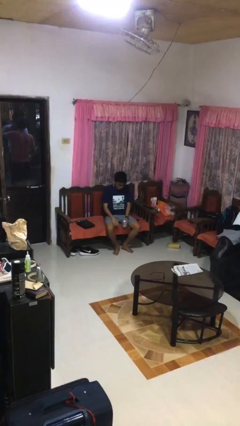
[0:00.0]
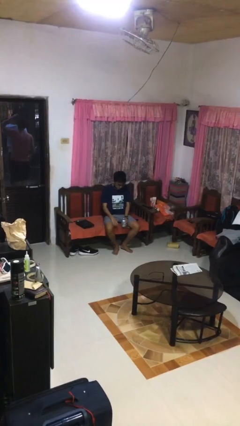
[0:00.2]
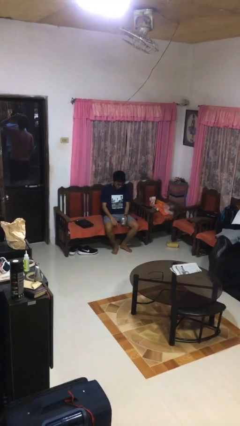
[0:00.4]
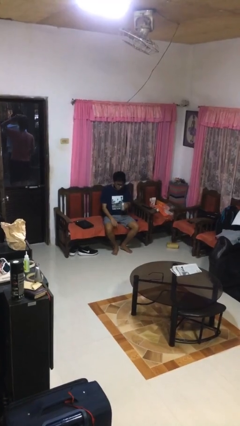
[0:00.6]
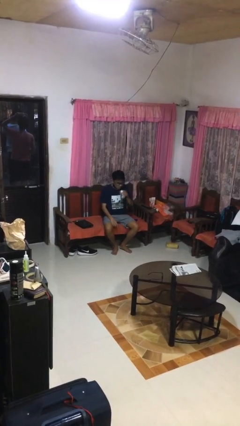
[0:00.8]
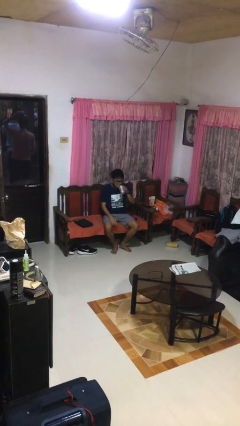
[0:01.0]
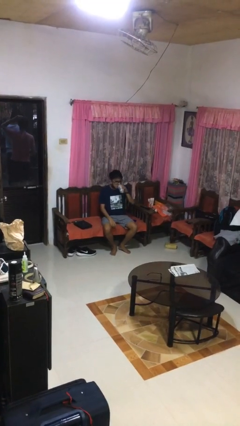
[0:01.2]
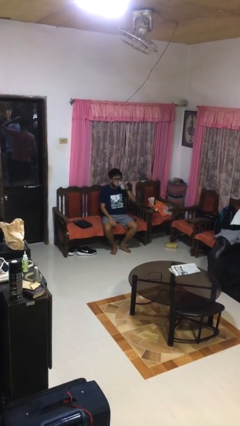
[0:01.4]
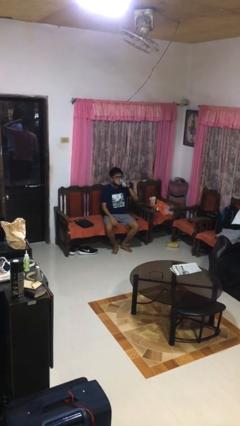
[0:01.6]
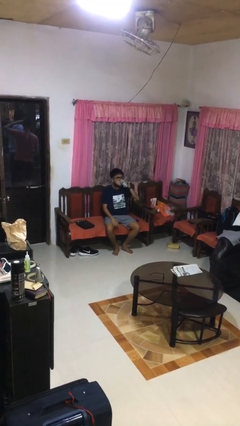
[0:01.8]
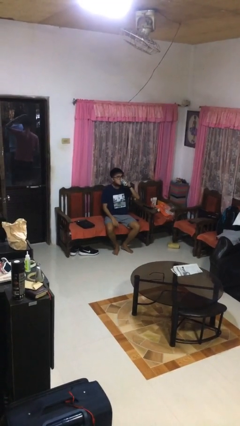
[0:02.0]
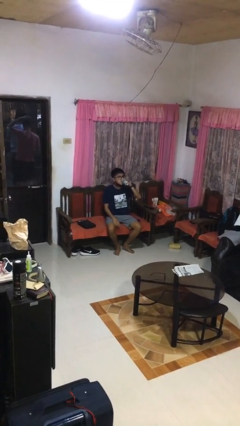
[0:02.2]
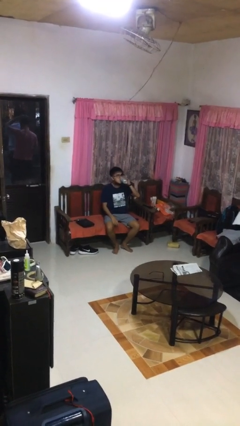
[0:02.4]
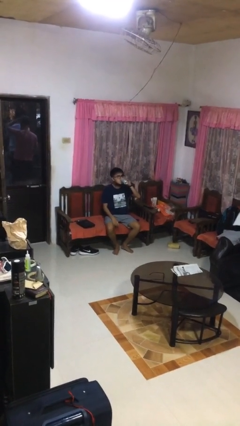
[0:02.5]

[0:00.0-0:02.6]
person drinks from beverage can

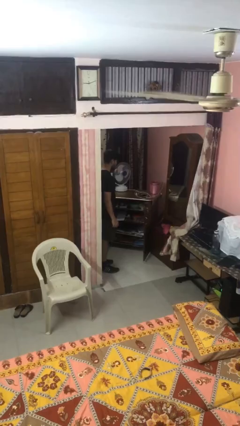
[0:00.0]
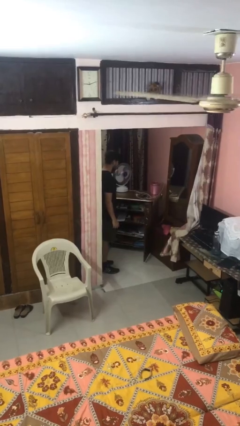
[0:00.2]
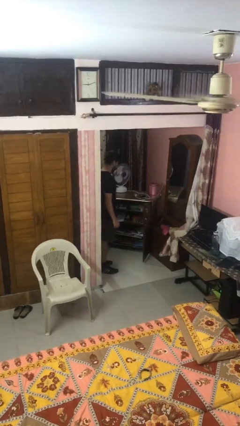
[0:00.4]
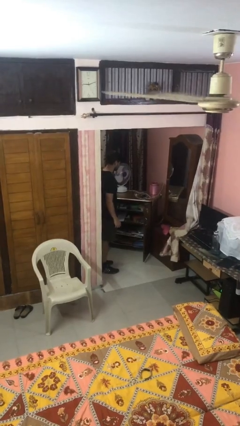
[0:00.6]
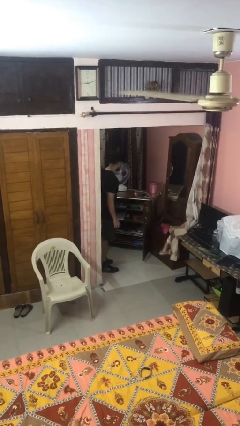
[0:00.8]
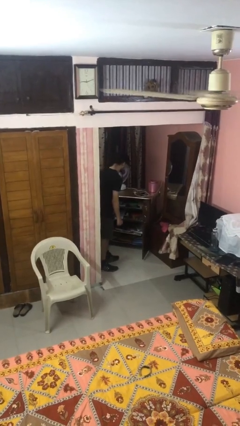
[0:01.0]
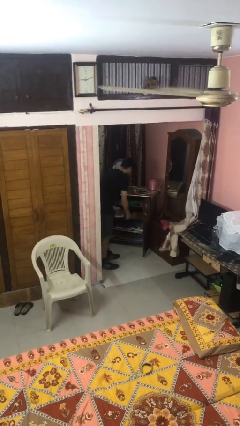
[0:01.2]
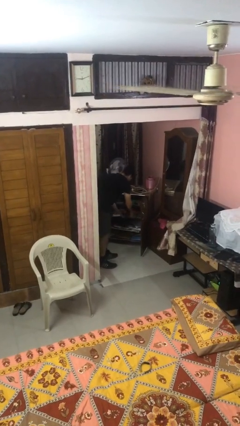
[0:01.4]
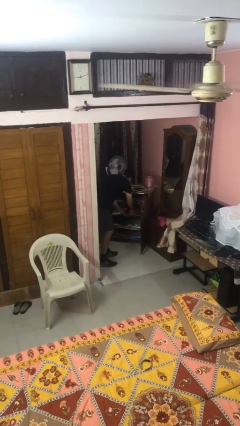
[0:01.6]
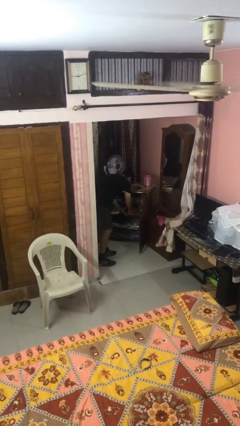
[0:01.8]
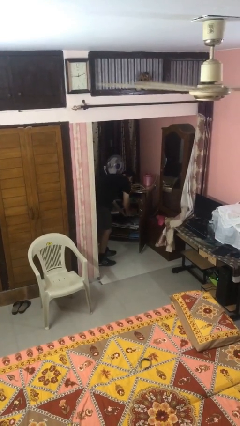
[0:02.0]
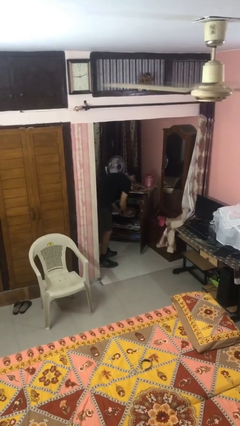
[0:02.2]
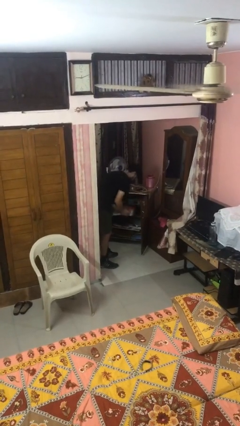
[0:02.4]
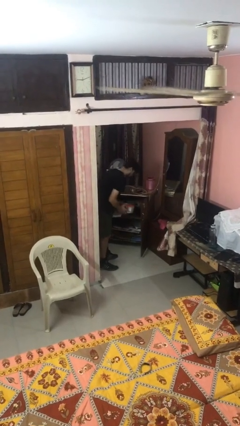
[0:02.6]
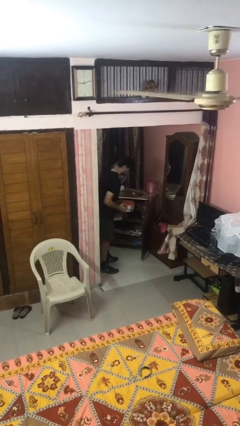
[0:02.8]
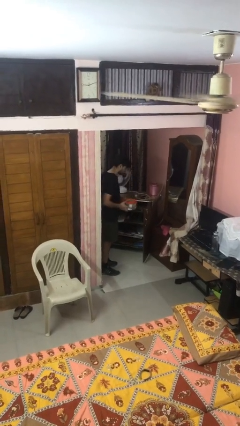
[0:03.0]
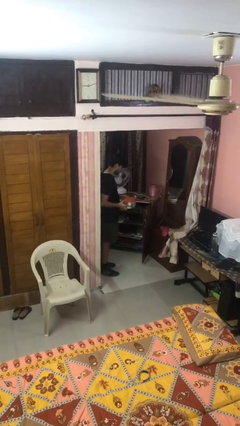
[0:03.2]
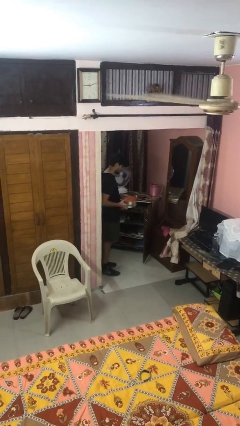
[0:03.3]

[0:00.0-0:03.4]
person picks up object from cabinet

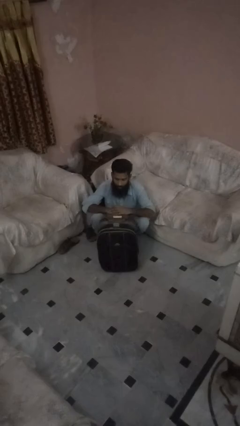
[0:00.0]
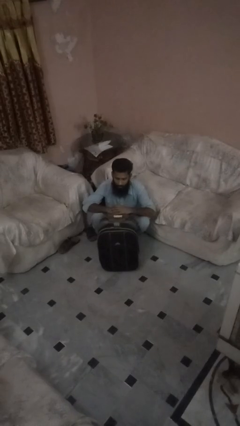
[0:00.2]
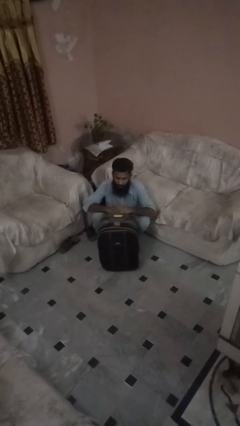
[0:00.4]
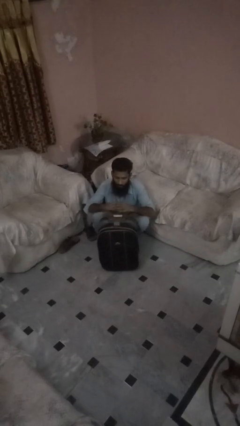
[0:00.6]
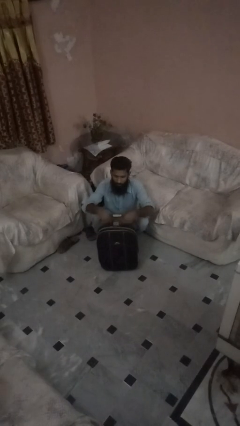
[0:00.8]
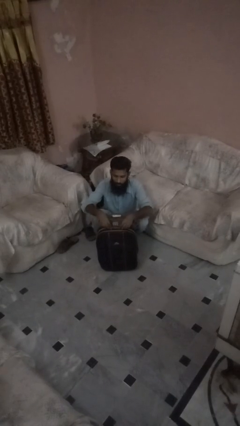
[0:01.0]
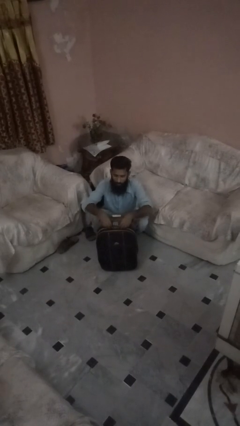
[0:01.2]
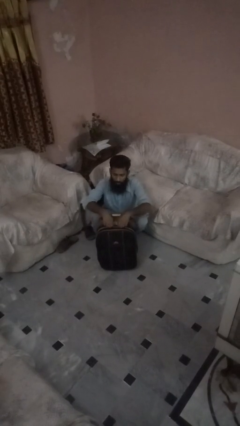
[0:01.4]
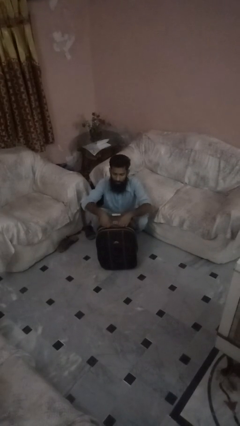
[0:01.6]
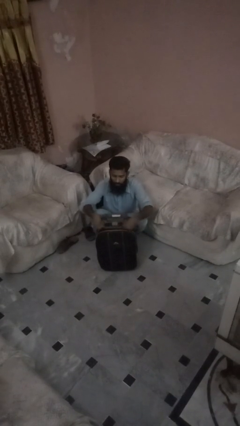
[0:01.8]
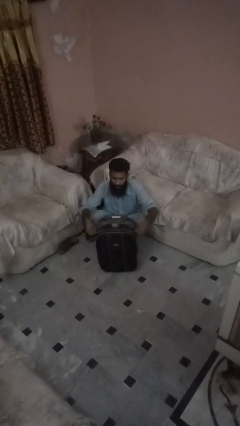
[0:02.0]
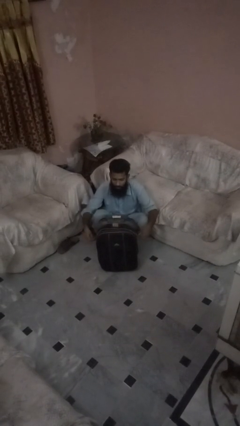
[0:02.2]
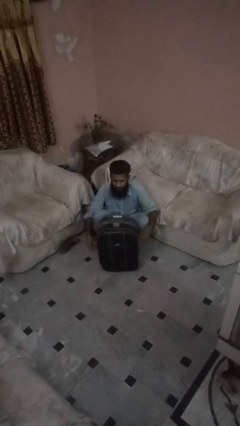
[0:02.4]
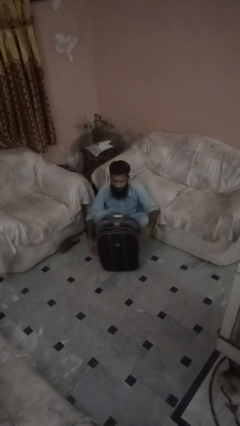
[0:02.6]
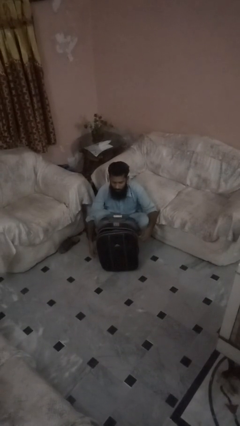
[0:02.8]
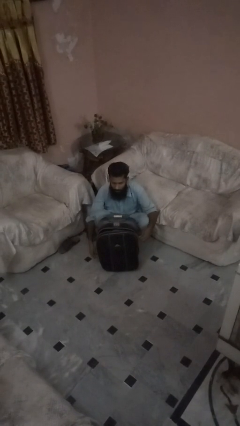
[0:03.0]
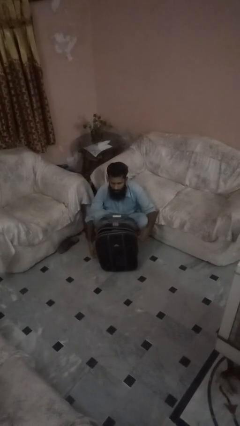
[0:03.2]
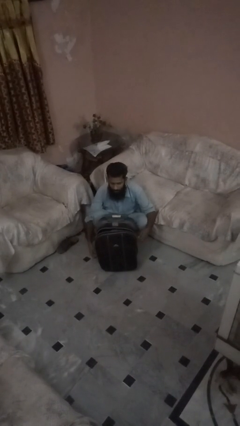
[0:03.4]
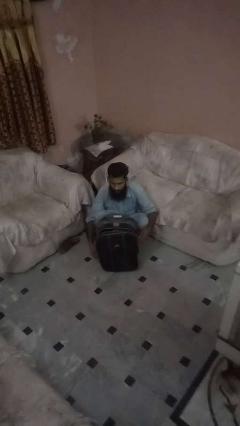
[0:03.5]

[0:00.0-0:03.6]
person opens suitcase

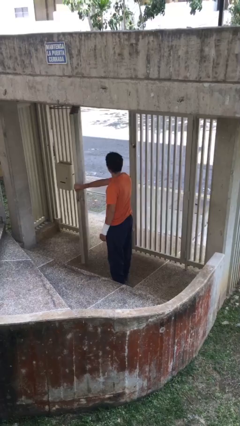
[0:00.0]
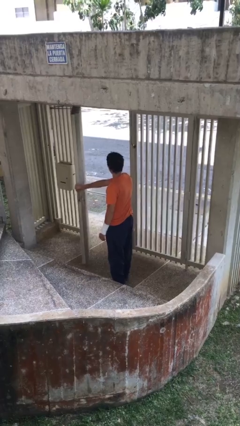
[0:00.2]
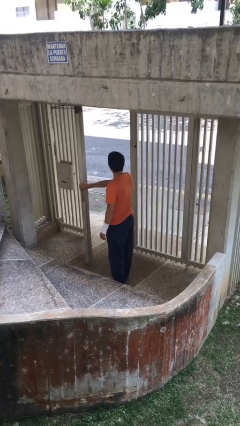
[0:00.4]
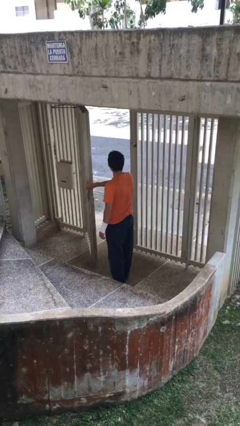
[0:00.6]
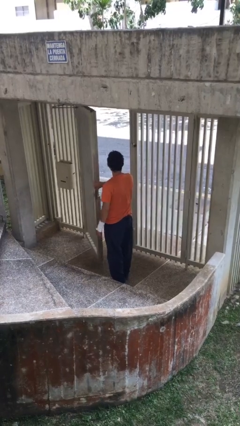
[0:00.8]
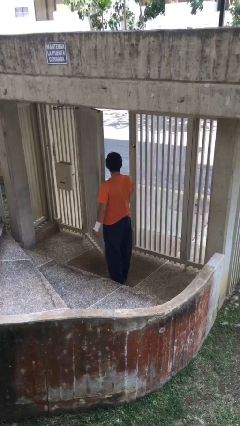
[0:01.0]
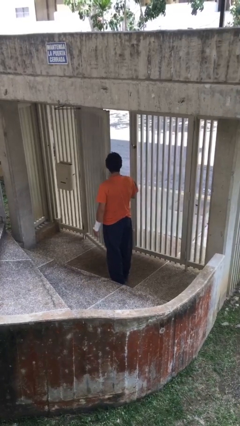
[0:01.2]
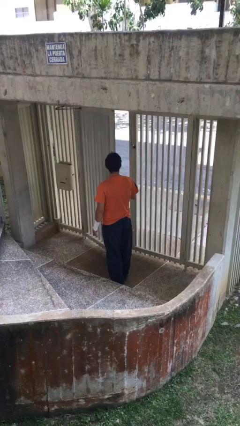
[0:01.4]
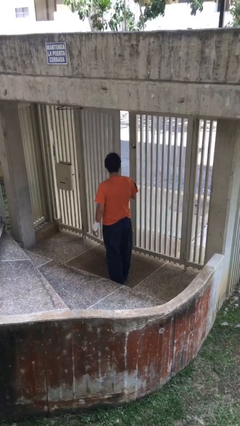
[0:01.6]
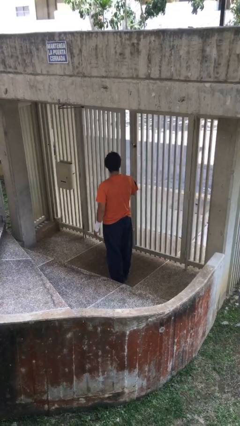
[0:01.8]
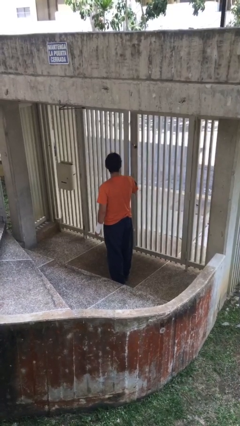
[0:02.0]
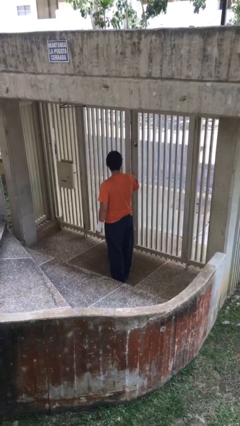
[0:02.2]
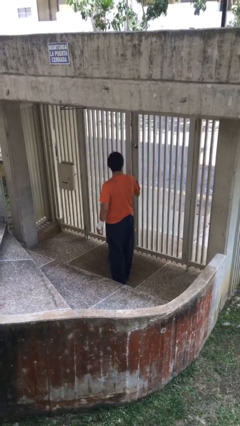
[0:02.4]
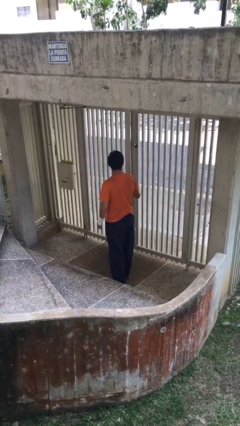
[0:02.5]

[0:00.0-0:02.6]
person closes facility door

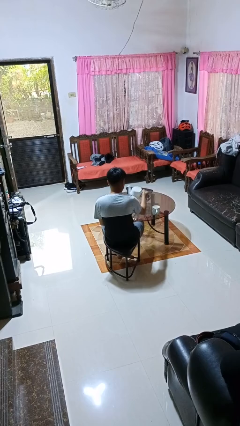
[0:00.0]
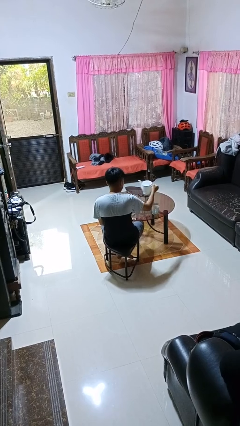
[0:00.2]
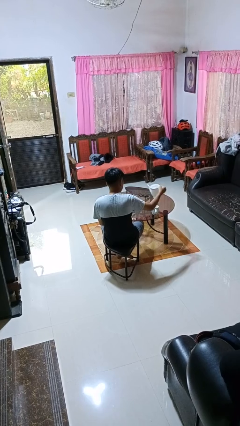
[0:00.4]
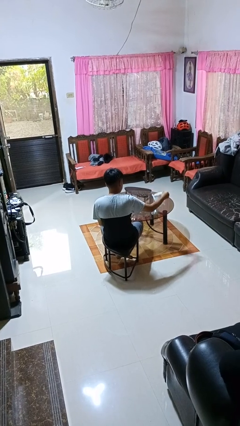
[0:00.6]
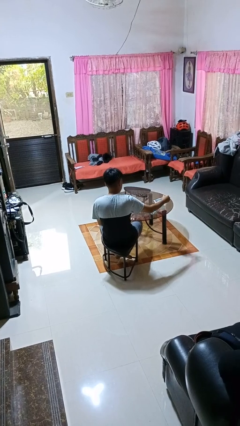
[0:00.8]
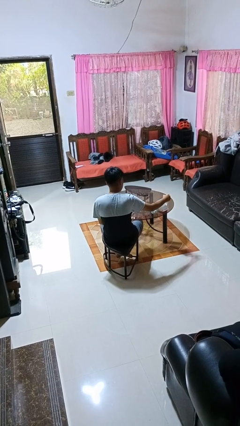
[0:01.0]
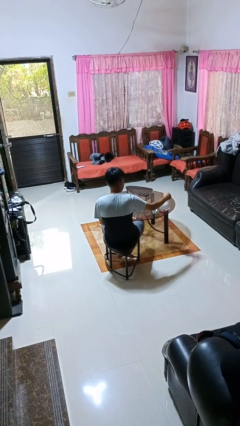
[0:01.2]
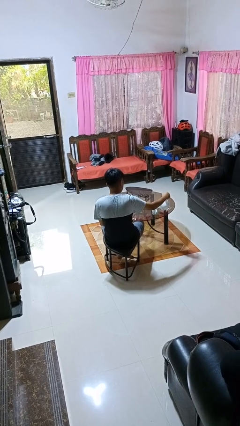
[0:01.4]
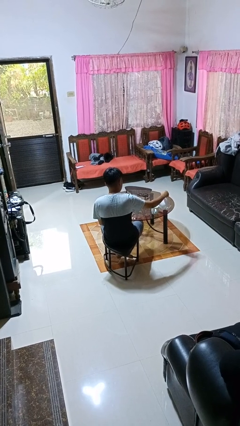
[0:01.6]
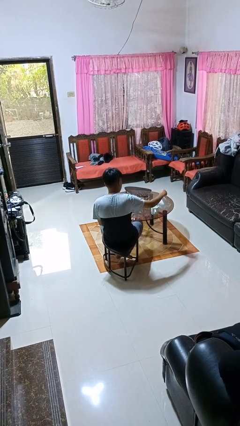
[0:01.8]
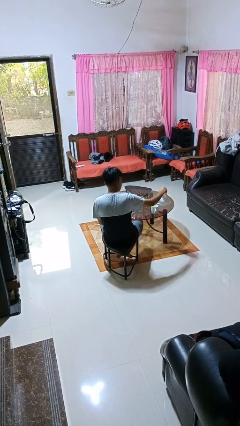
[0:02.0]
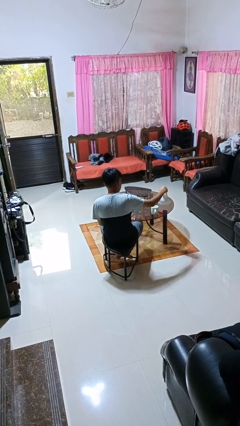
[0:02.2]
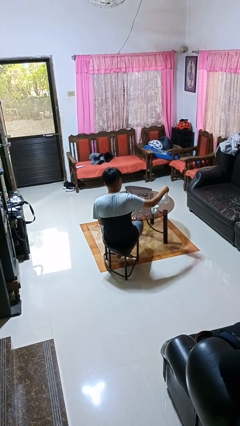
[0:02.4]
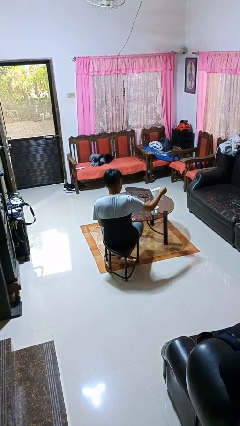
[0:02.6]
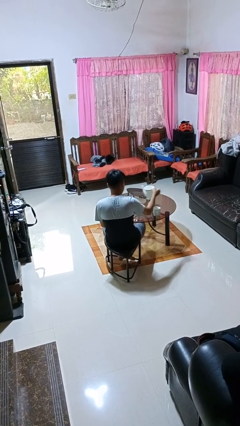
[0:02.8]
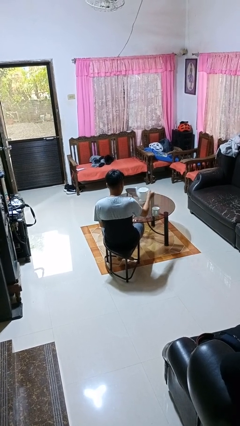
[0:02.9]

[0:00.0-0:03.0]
person pours coffee into mug

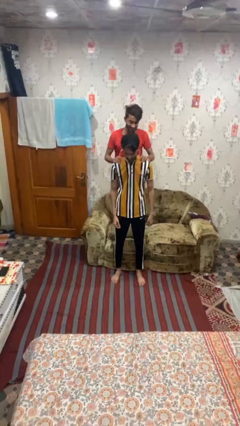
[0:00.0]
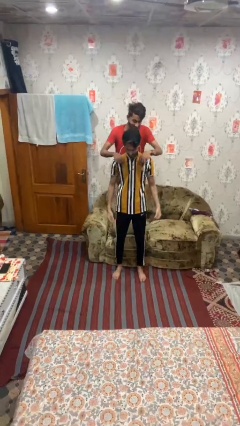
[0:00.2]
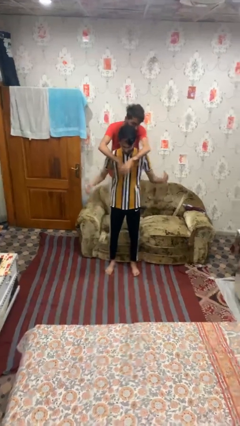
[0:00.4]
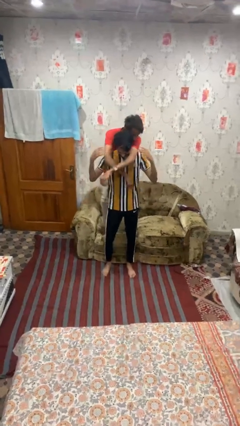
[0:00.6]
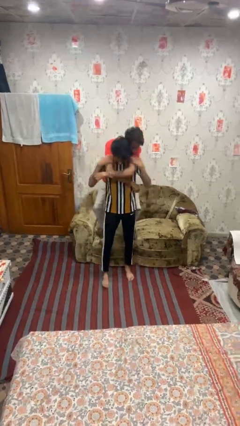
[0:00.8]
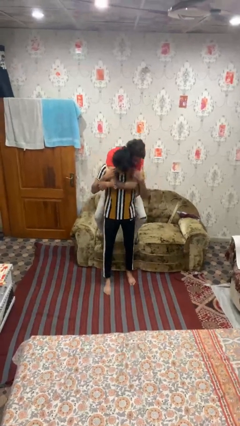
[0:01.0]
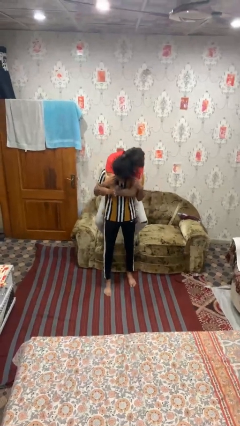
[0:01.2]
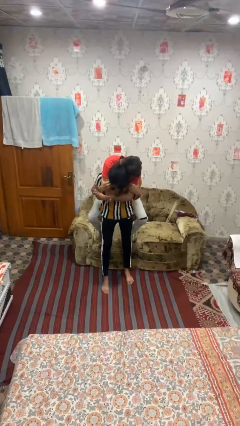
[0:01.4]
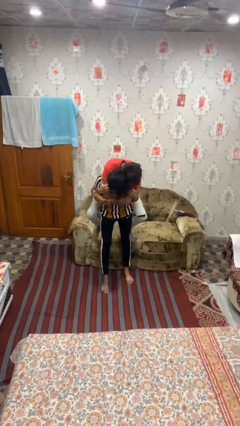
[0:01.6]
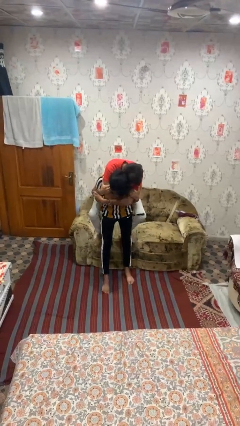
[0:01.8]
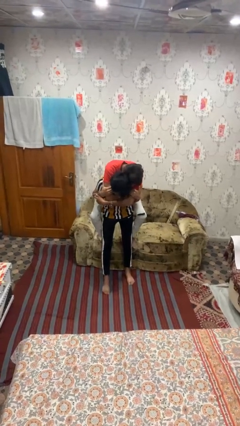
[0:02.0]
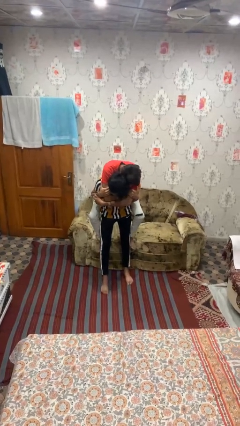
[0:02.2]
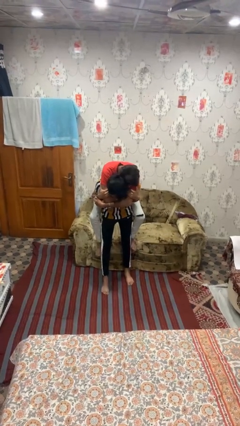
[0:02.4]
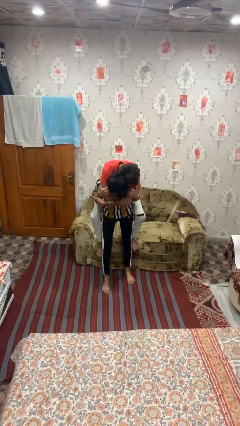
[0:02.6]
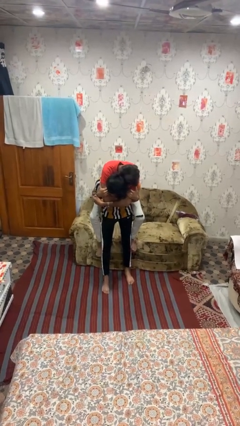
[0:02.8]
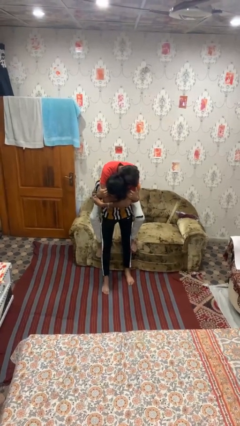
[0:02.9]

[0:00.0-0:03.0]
person carries person on back
